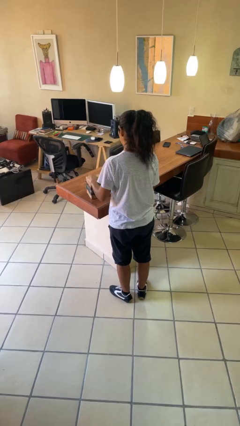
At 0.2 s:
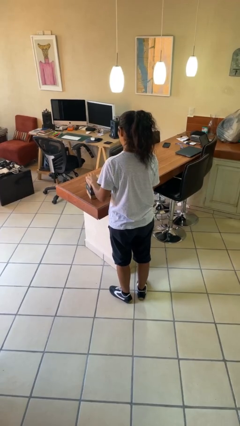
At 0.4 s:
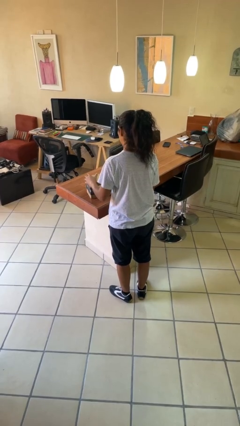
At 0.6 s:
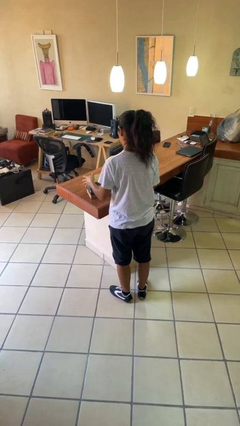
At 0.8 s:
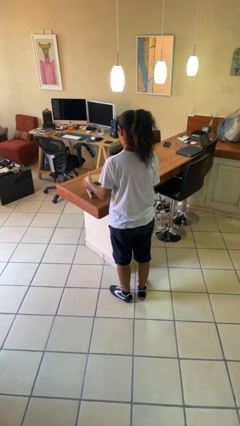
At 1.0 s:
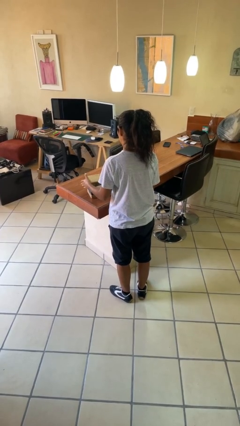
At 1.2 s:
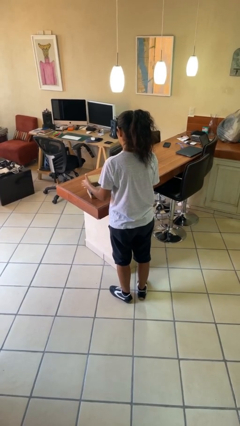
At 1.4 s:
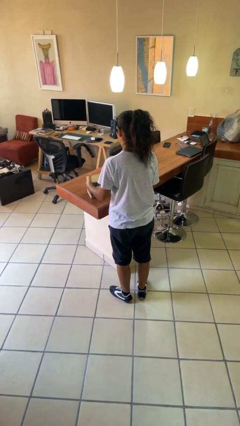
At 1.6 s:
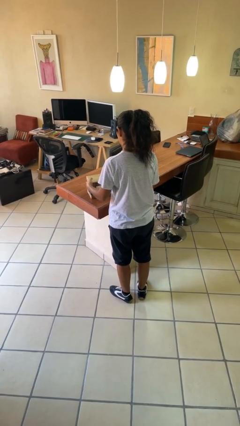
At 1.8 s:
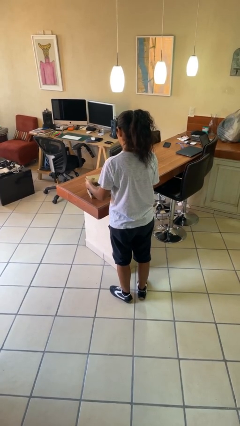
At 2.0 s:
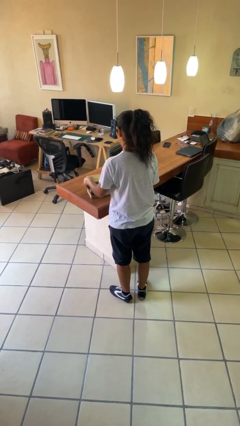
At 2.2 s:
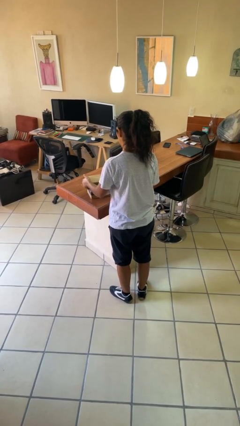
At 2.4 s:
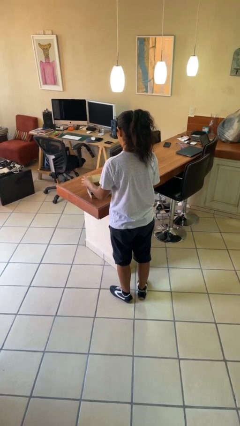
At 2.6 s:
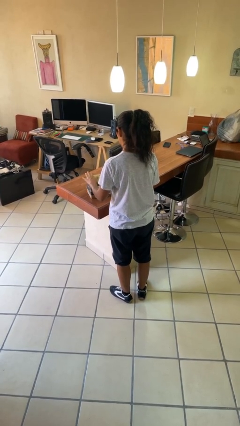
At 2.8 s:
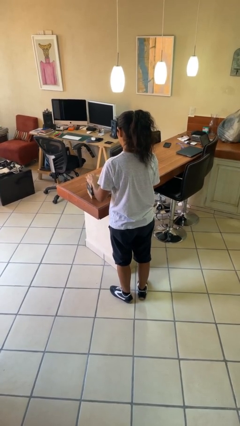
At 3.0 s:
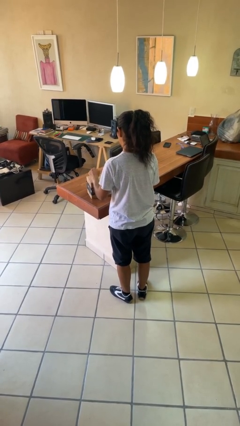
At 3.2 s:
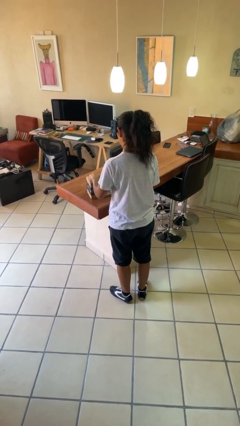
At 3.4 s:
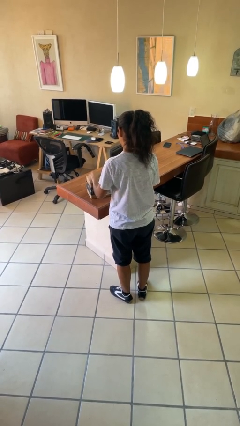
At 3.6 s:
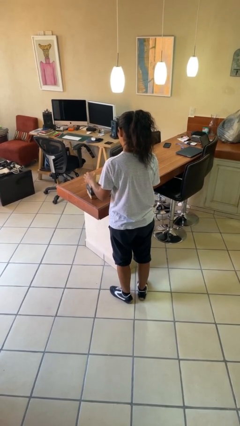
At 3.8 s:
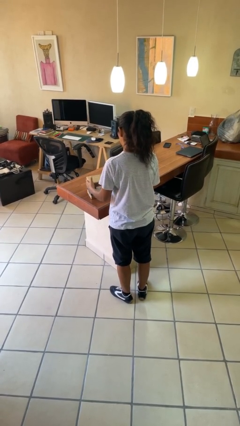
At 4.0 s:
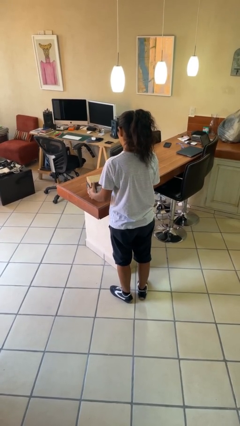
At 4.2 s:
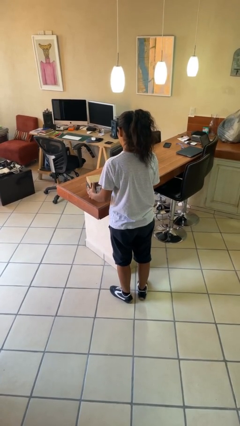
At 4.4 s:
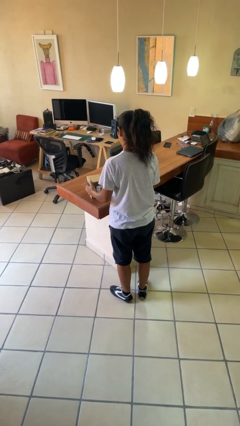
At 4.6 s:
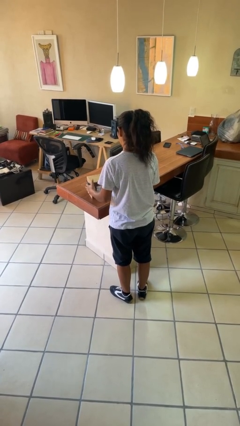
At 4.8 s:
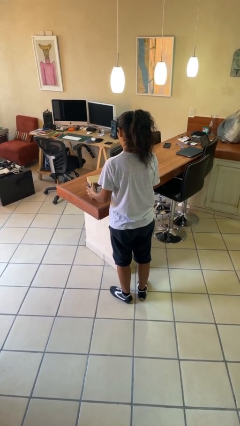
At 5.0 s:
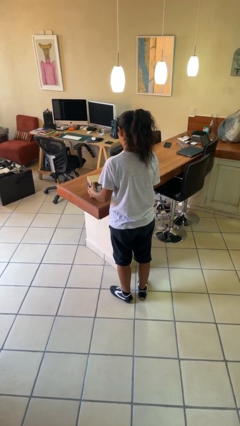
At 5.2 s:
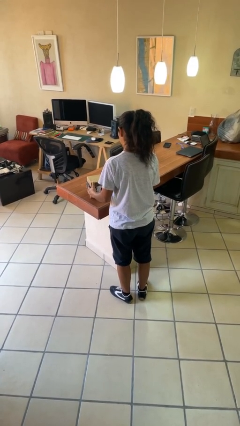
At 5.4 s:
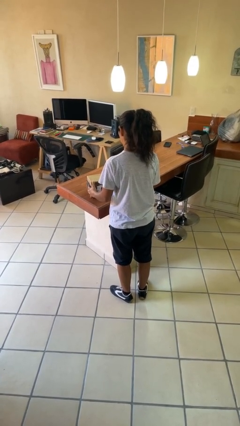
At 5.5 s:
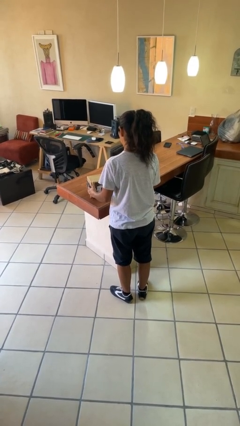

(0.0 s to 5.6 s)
person taps object with finger

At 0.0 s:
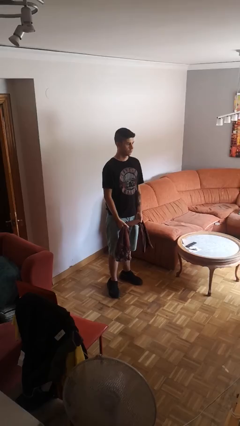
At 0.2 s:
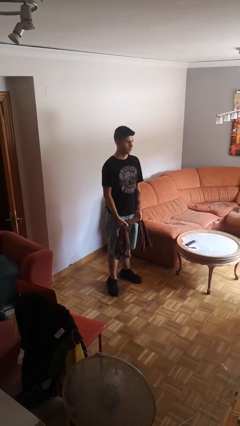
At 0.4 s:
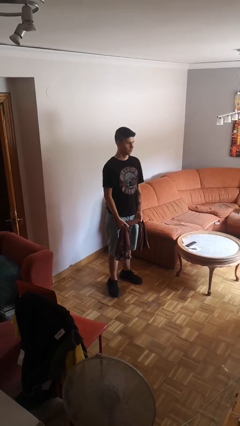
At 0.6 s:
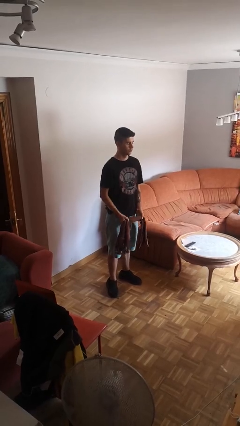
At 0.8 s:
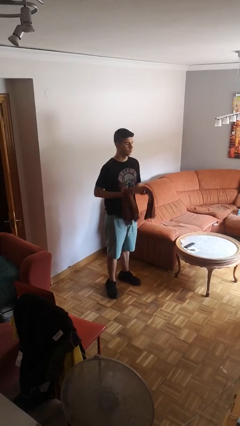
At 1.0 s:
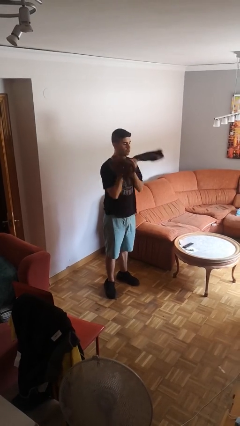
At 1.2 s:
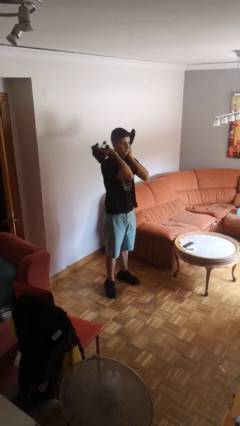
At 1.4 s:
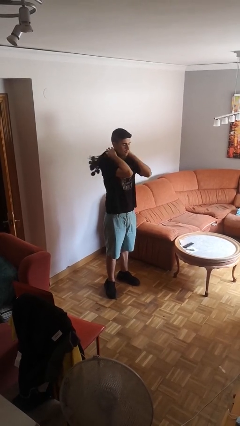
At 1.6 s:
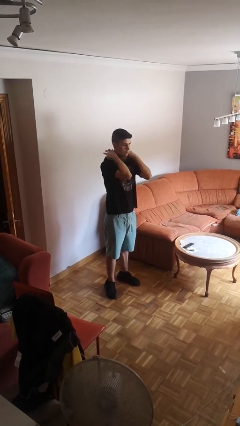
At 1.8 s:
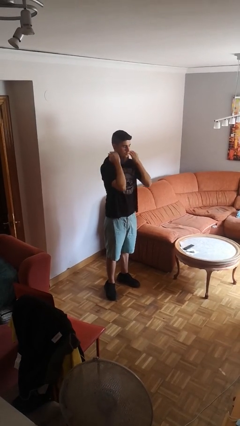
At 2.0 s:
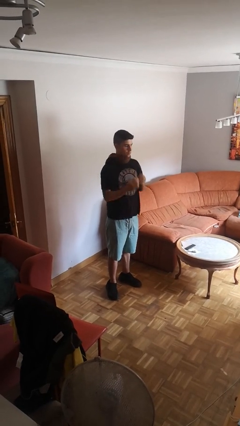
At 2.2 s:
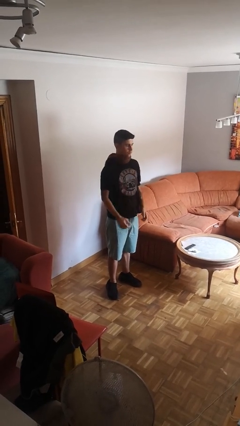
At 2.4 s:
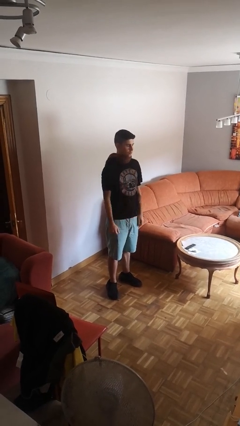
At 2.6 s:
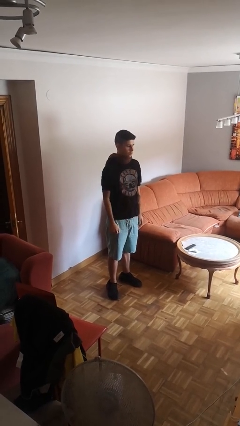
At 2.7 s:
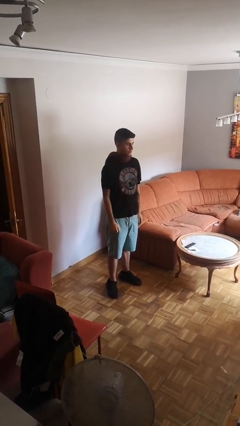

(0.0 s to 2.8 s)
person puts on scarf

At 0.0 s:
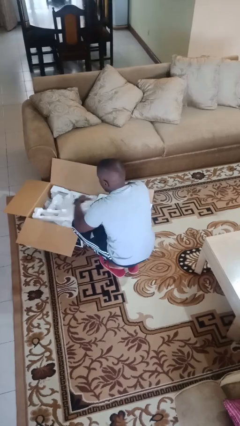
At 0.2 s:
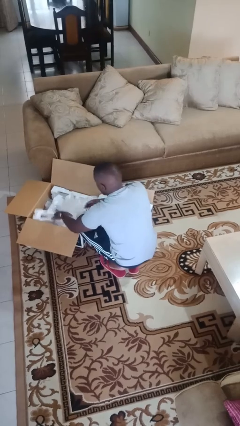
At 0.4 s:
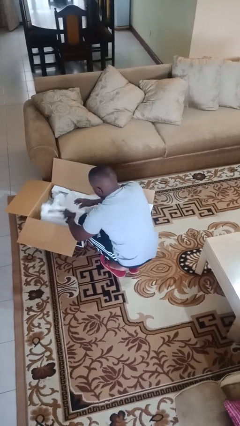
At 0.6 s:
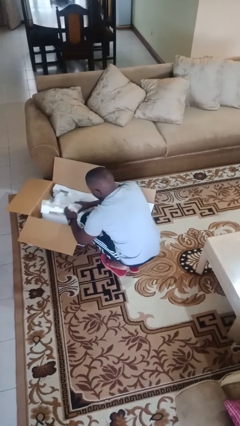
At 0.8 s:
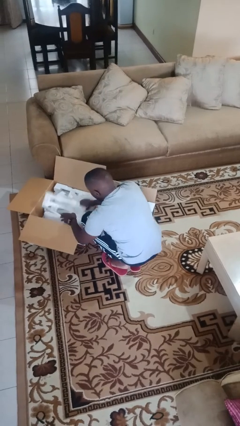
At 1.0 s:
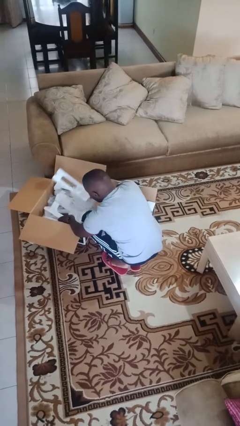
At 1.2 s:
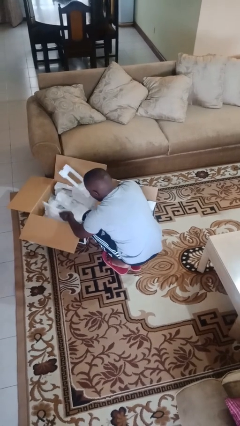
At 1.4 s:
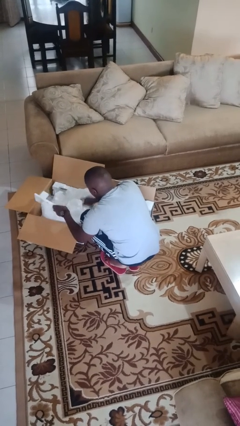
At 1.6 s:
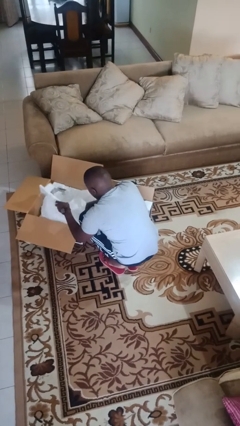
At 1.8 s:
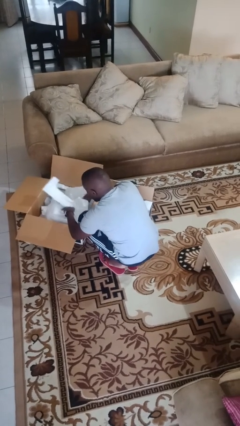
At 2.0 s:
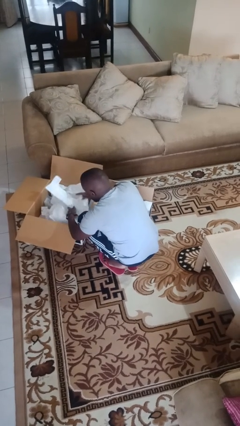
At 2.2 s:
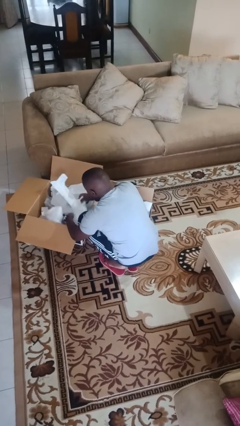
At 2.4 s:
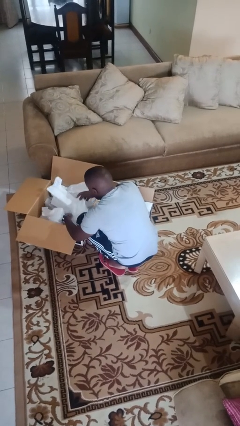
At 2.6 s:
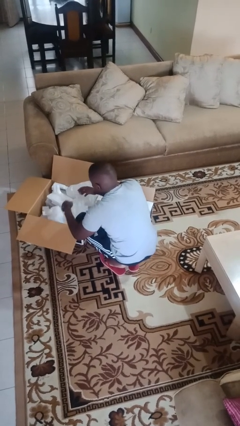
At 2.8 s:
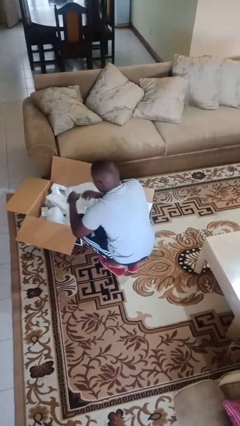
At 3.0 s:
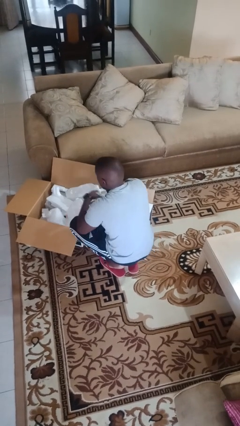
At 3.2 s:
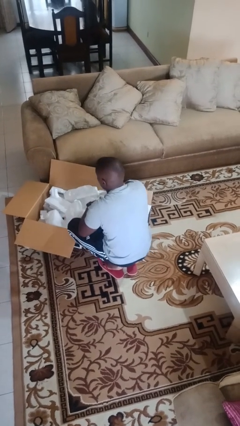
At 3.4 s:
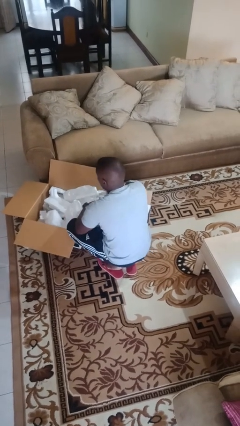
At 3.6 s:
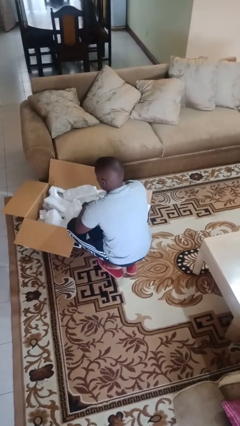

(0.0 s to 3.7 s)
person searches in box

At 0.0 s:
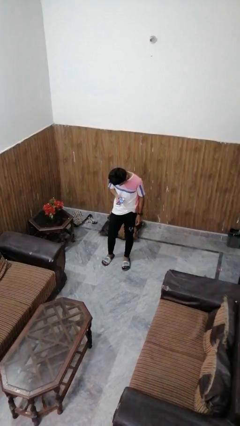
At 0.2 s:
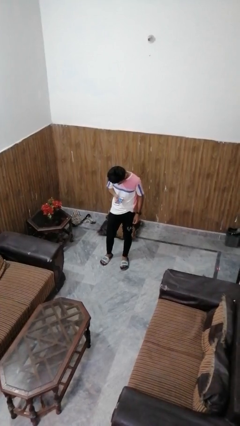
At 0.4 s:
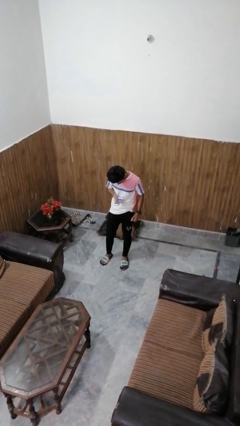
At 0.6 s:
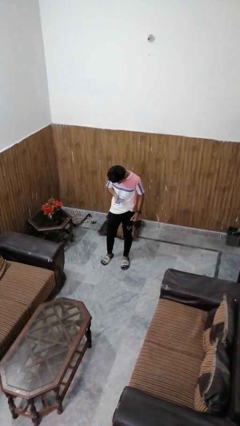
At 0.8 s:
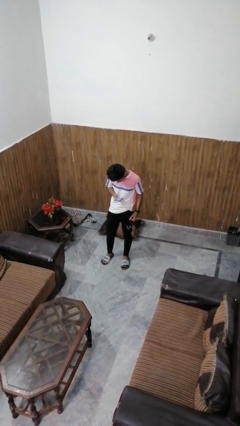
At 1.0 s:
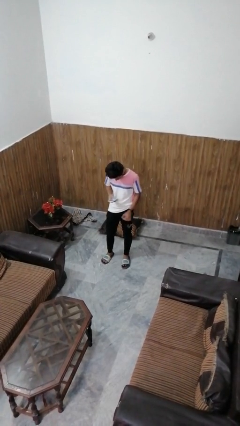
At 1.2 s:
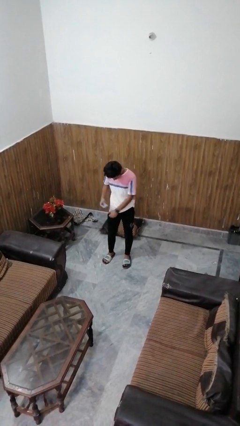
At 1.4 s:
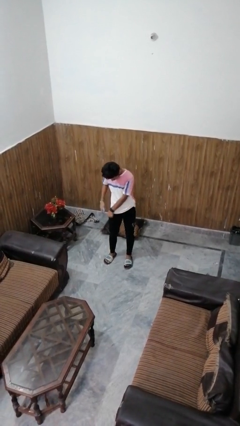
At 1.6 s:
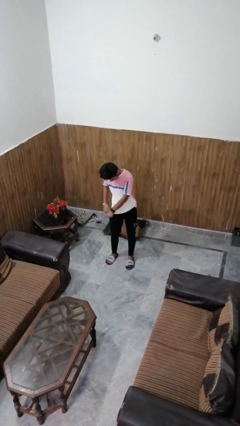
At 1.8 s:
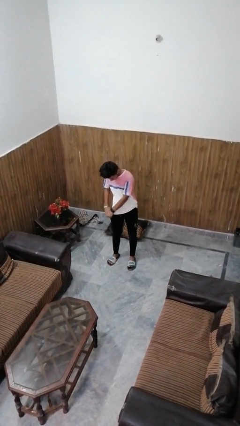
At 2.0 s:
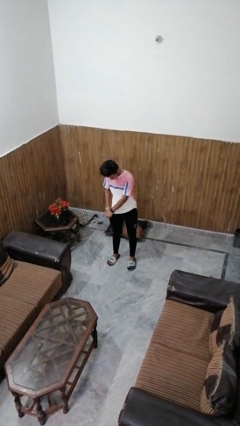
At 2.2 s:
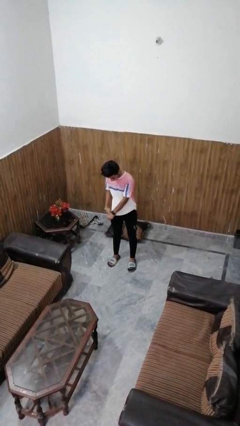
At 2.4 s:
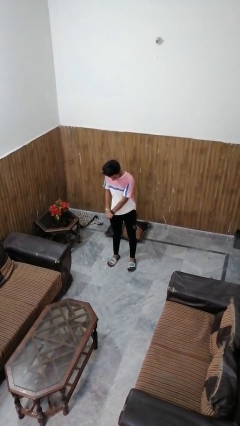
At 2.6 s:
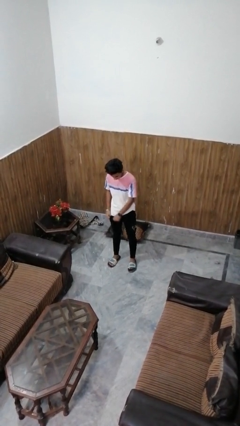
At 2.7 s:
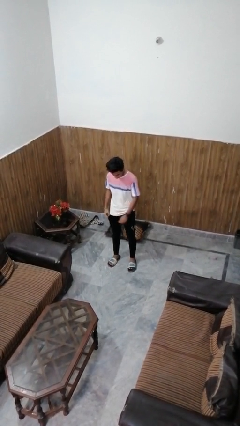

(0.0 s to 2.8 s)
person puts phone into pocket

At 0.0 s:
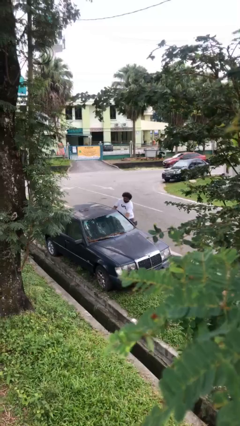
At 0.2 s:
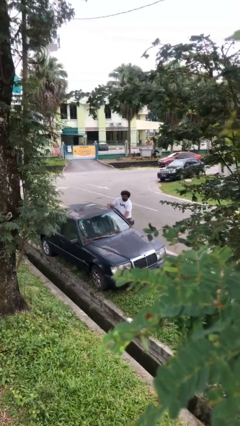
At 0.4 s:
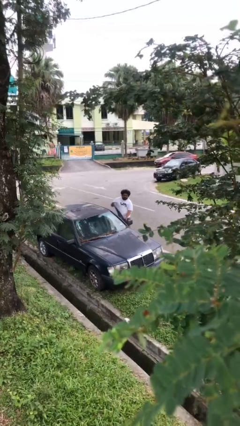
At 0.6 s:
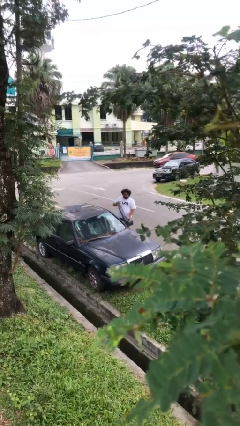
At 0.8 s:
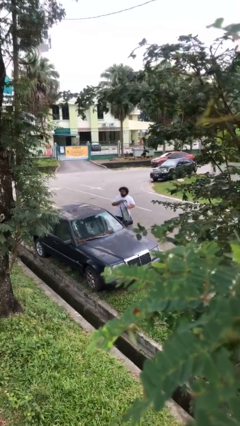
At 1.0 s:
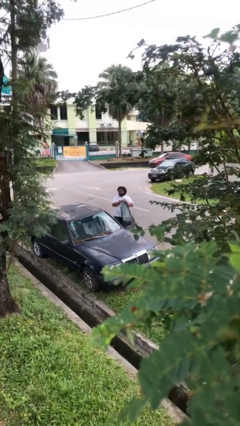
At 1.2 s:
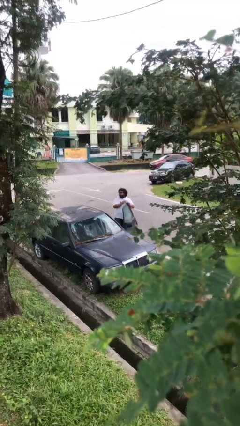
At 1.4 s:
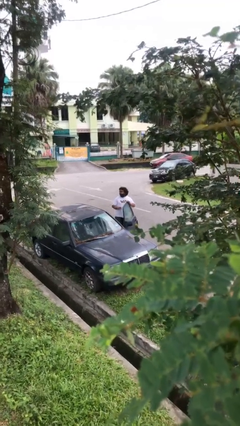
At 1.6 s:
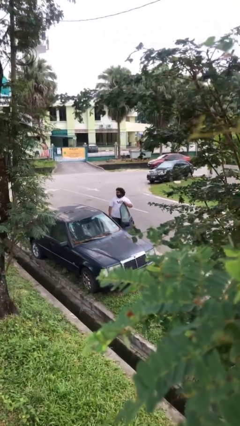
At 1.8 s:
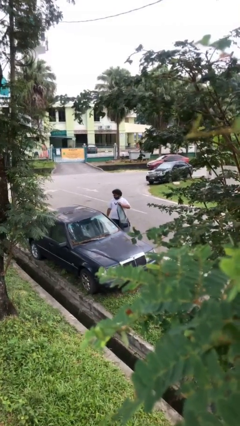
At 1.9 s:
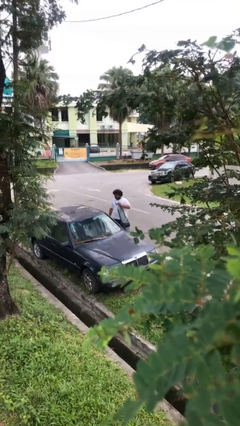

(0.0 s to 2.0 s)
person opens car door

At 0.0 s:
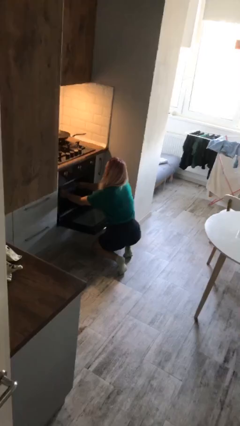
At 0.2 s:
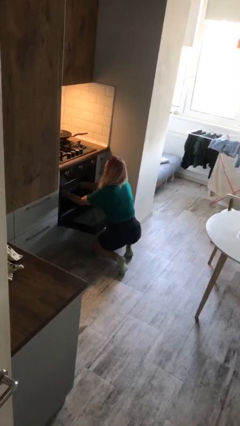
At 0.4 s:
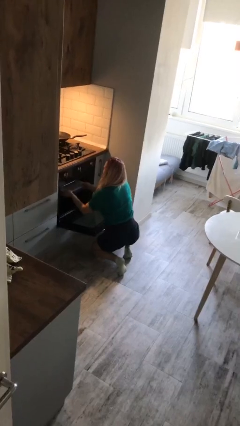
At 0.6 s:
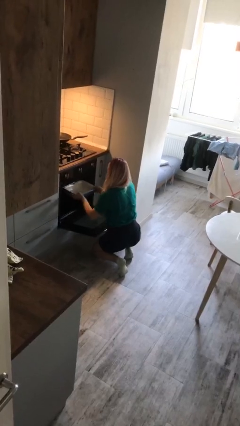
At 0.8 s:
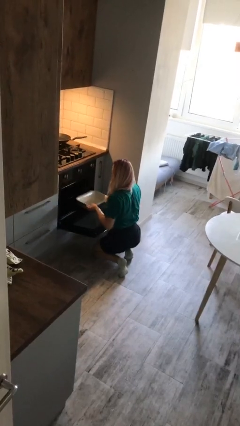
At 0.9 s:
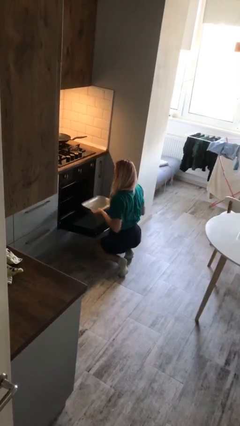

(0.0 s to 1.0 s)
person takes object from oven
